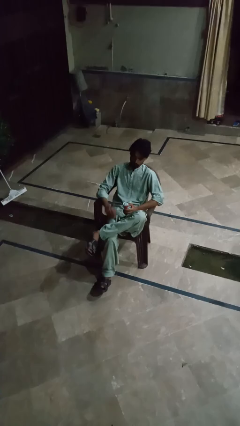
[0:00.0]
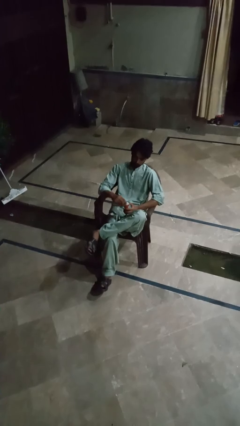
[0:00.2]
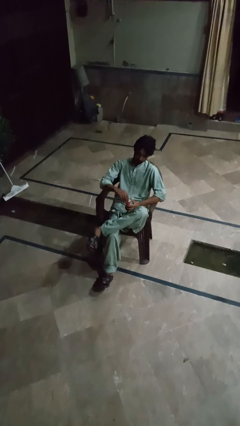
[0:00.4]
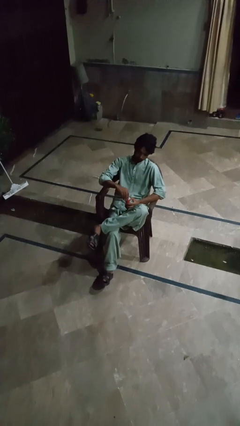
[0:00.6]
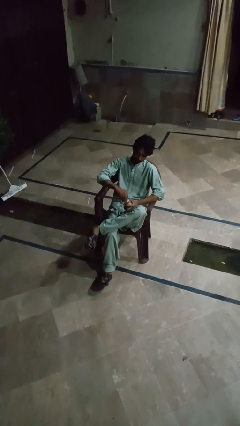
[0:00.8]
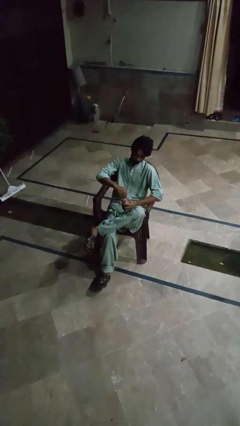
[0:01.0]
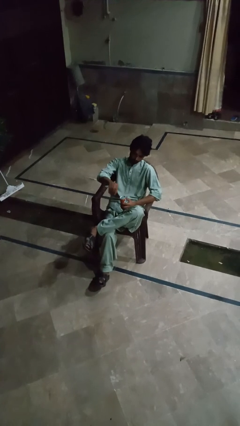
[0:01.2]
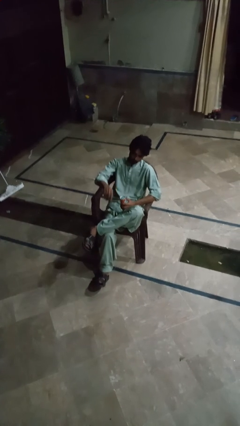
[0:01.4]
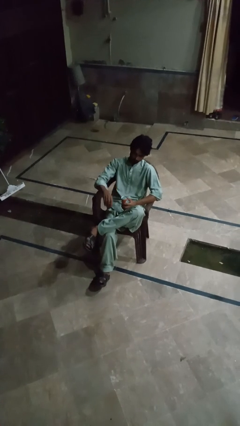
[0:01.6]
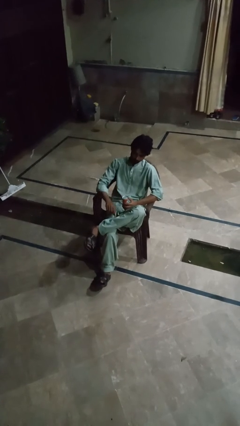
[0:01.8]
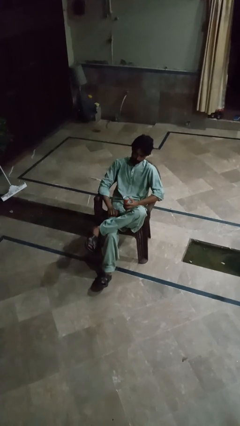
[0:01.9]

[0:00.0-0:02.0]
person opens can with can opener

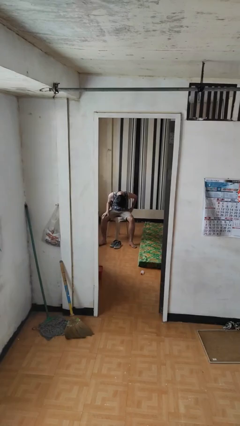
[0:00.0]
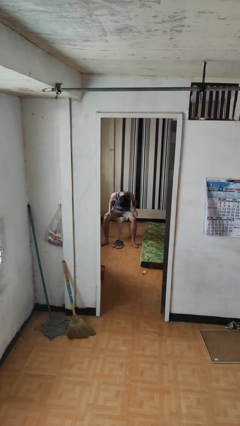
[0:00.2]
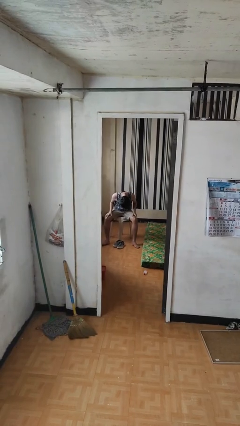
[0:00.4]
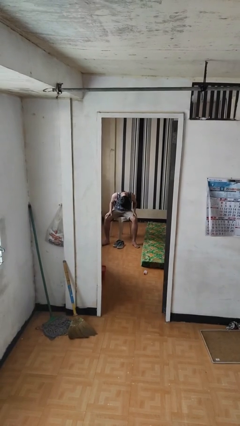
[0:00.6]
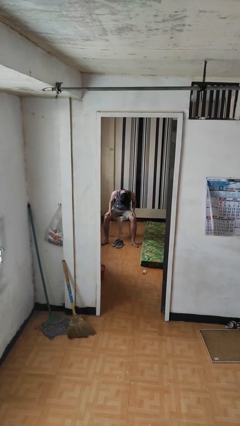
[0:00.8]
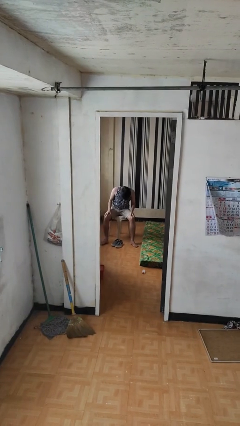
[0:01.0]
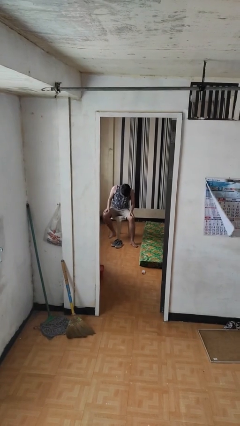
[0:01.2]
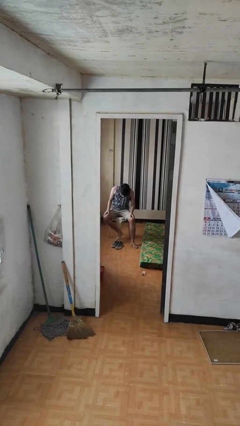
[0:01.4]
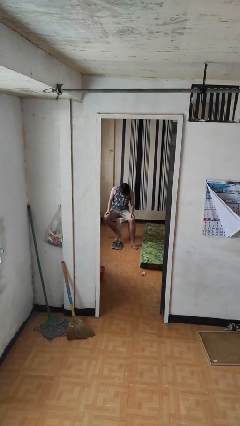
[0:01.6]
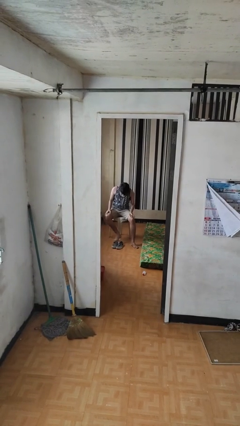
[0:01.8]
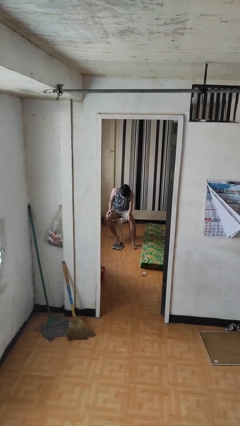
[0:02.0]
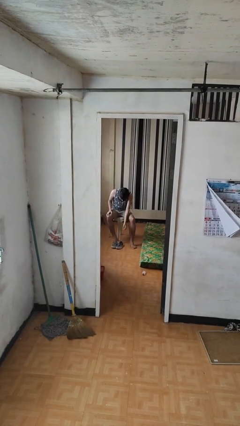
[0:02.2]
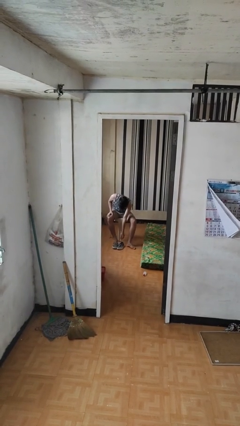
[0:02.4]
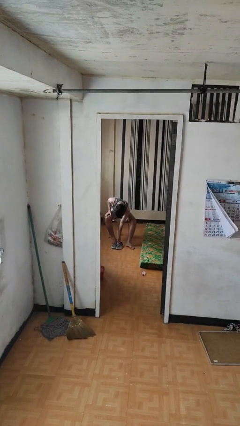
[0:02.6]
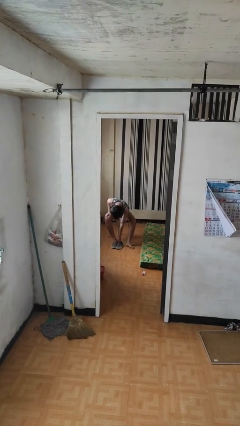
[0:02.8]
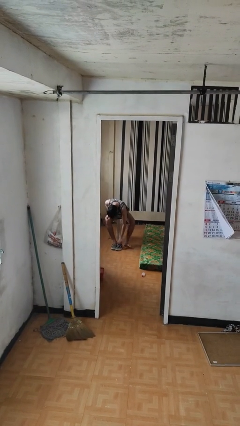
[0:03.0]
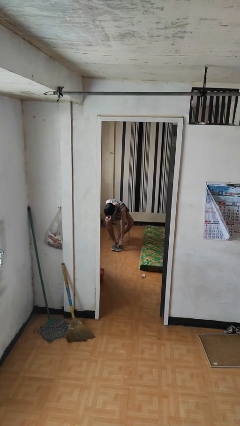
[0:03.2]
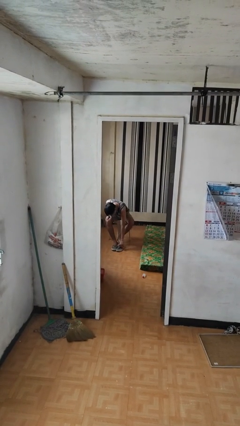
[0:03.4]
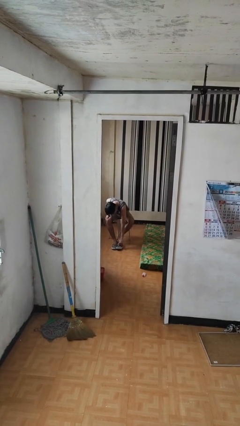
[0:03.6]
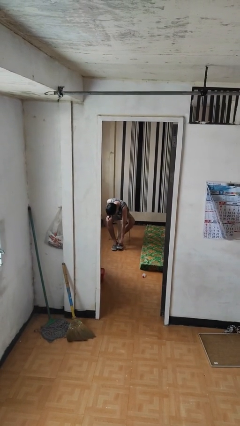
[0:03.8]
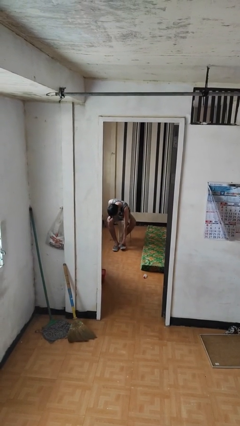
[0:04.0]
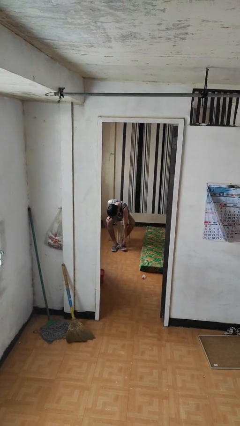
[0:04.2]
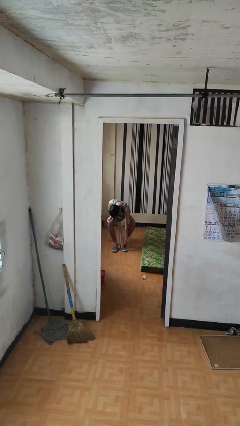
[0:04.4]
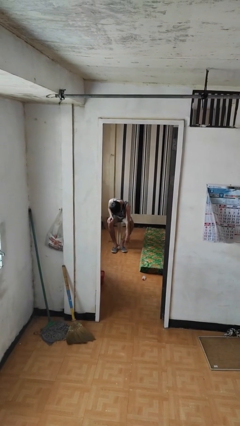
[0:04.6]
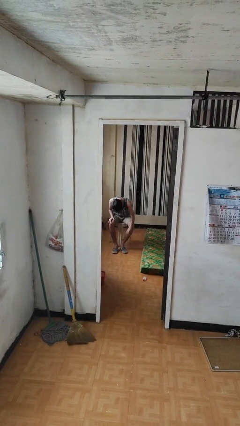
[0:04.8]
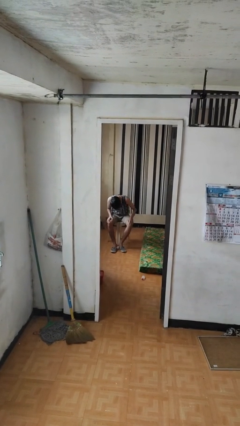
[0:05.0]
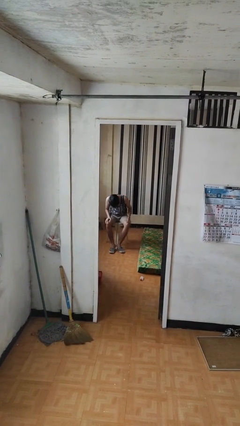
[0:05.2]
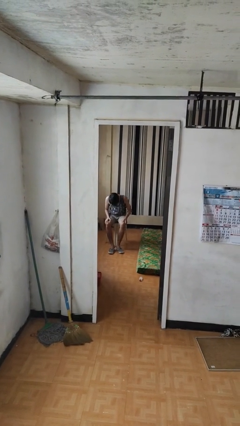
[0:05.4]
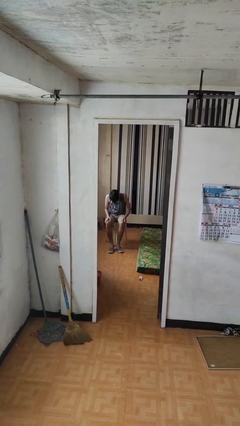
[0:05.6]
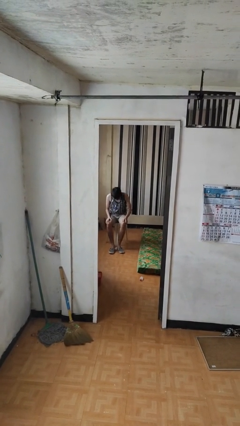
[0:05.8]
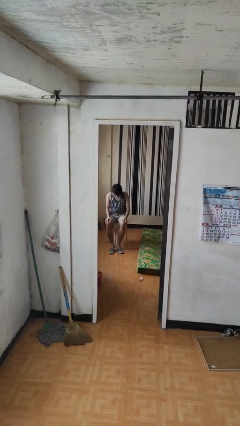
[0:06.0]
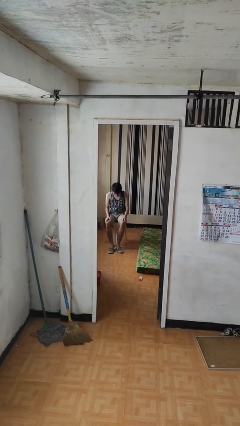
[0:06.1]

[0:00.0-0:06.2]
person puts on shoes

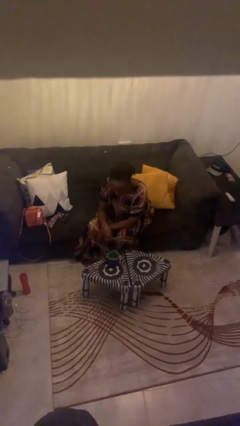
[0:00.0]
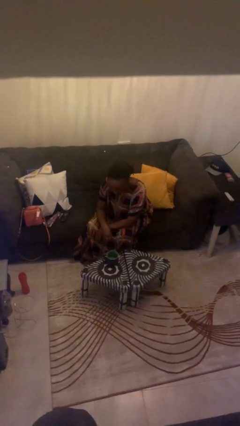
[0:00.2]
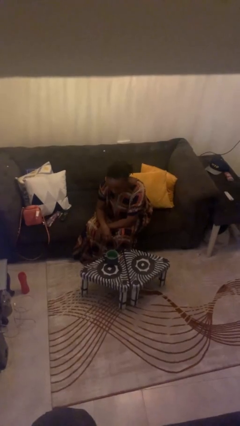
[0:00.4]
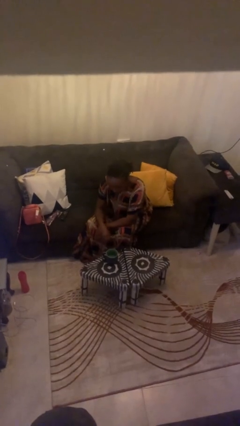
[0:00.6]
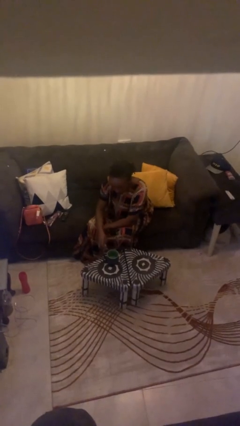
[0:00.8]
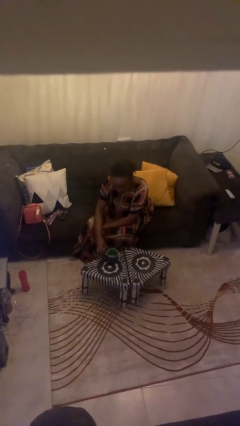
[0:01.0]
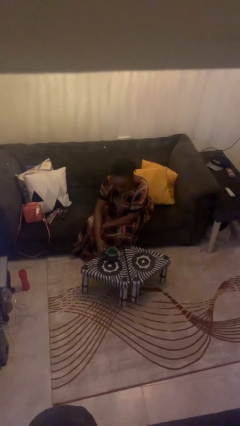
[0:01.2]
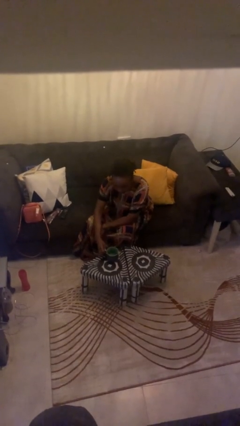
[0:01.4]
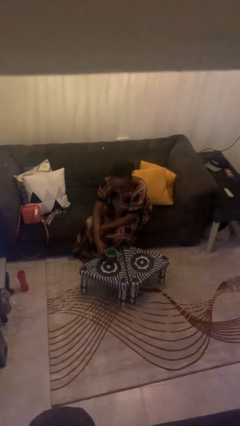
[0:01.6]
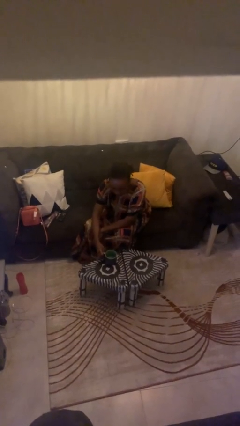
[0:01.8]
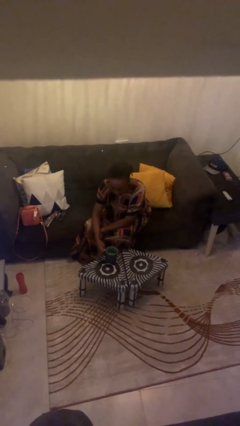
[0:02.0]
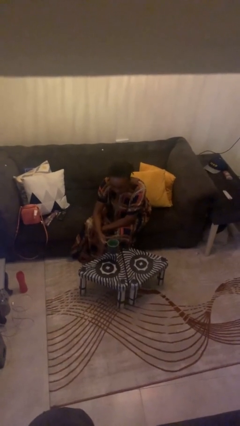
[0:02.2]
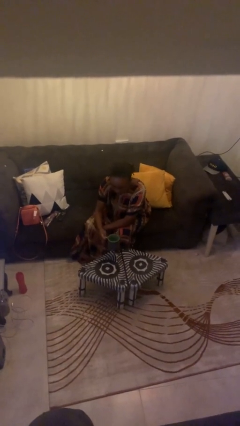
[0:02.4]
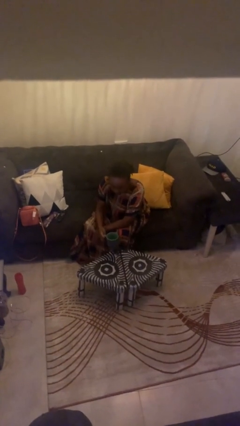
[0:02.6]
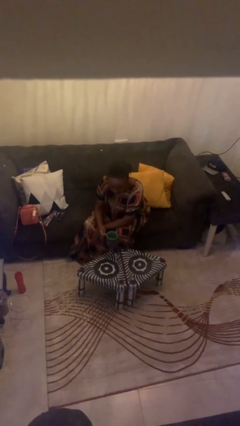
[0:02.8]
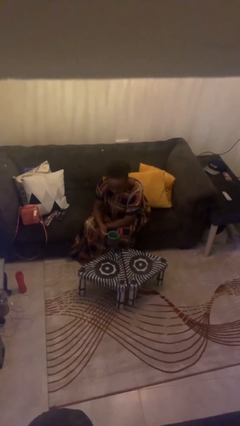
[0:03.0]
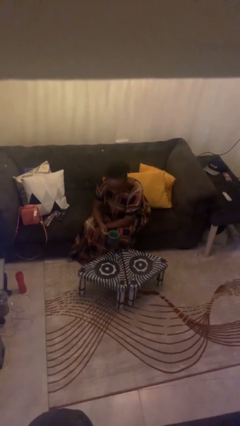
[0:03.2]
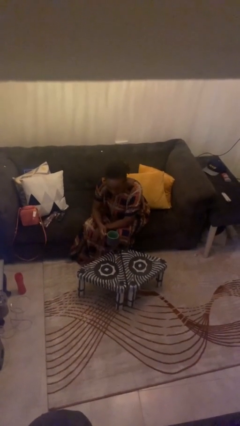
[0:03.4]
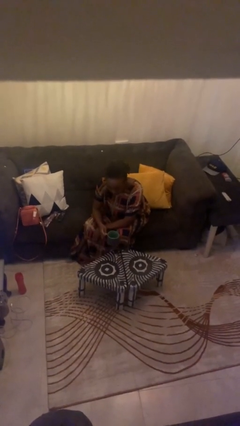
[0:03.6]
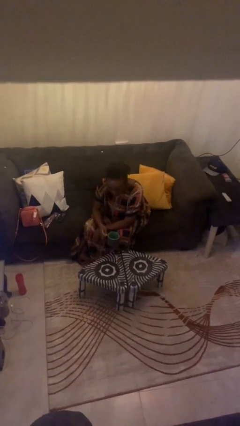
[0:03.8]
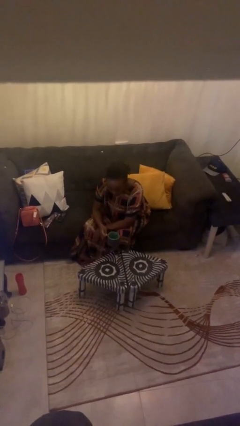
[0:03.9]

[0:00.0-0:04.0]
person picks up object from table

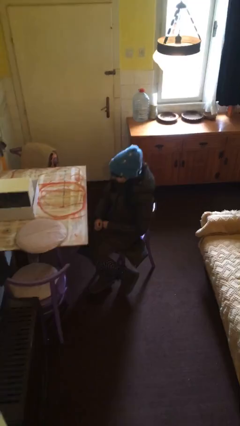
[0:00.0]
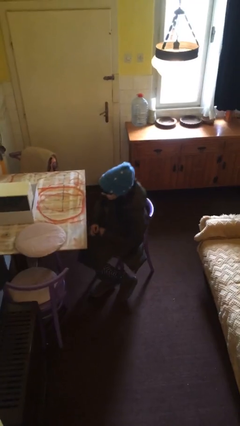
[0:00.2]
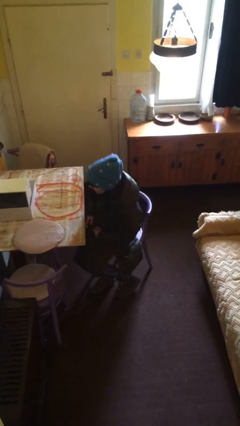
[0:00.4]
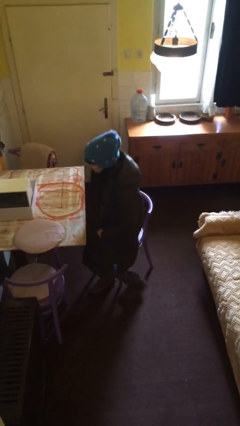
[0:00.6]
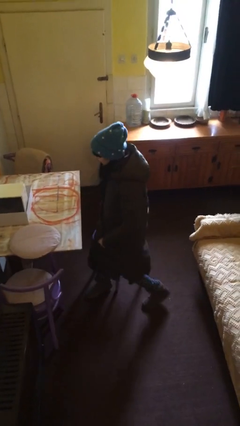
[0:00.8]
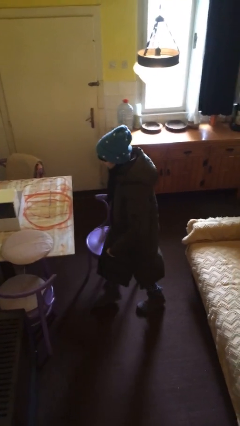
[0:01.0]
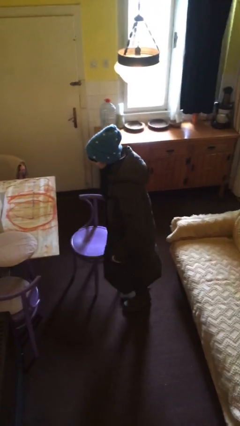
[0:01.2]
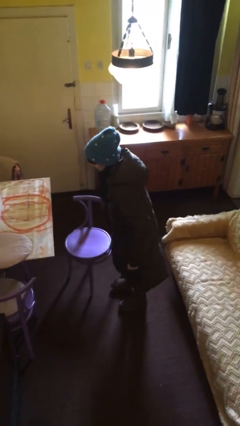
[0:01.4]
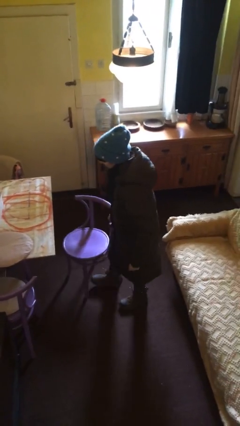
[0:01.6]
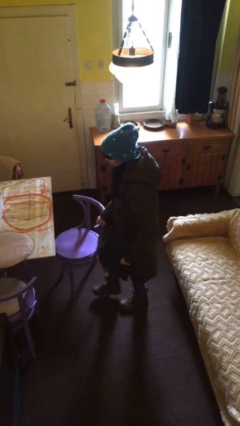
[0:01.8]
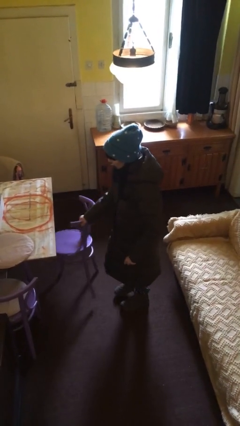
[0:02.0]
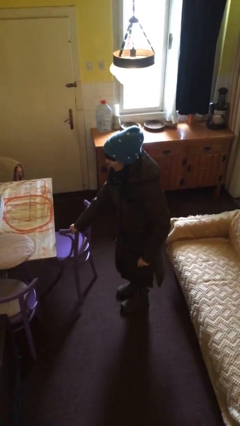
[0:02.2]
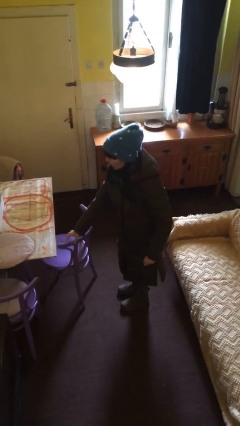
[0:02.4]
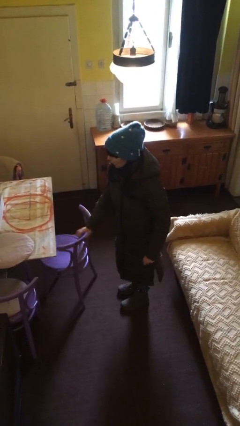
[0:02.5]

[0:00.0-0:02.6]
person stands up

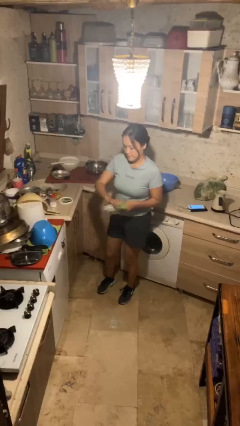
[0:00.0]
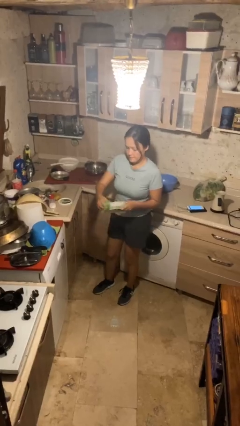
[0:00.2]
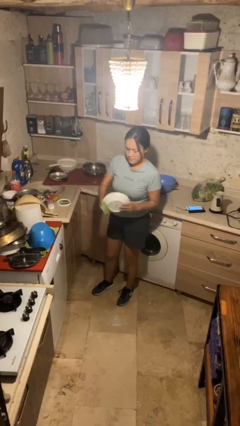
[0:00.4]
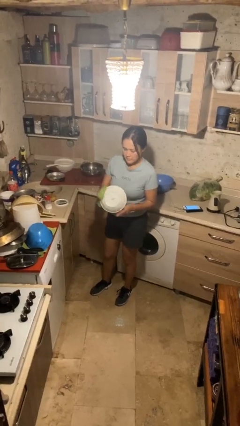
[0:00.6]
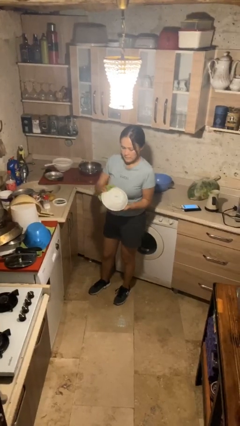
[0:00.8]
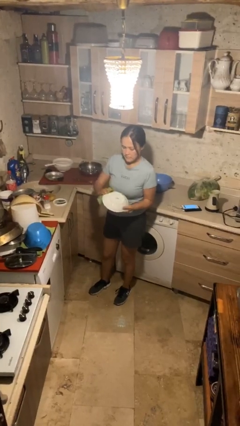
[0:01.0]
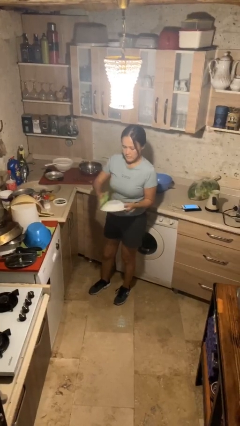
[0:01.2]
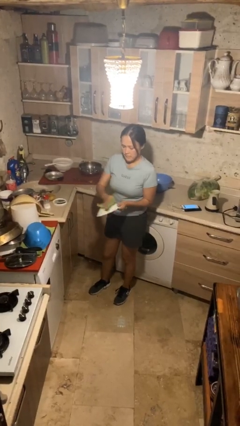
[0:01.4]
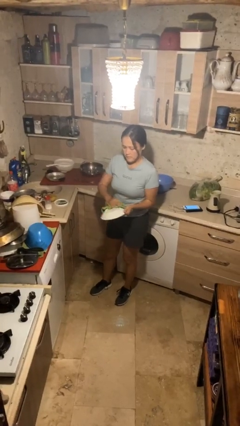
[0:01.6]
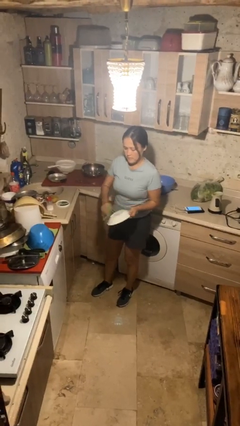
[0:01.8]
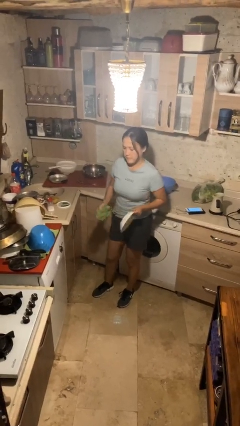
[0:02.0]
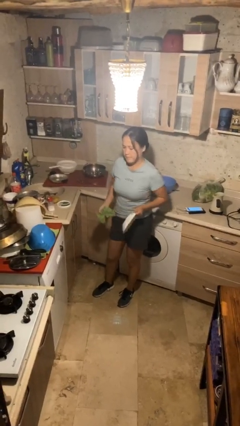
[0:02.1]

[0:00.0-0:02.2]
person dries dish

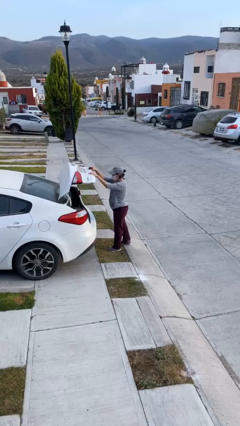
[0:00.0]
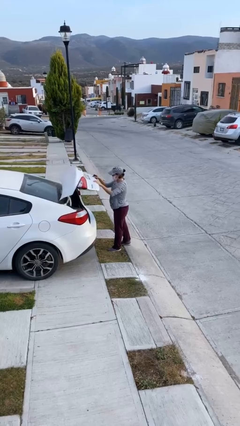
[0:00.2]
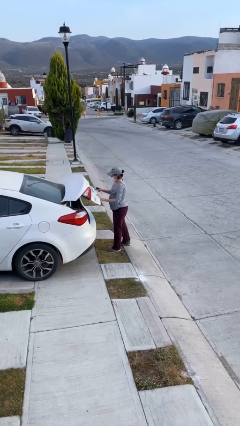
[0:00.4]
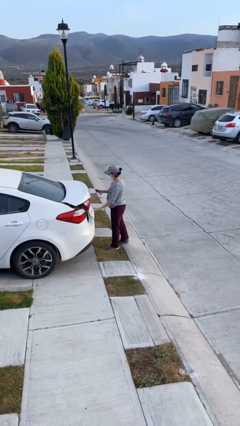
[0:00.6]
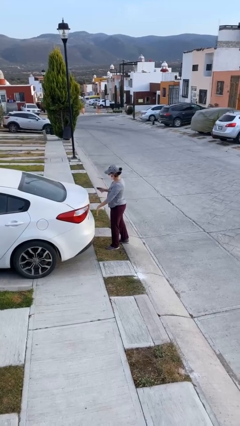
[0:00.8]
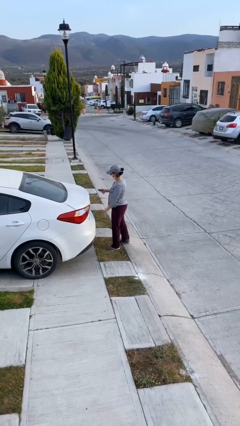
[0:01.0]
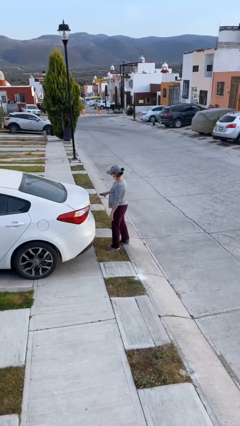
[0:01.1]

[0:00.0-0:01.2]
person closes car trunk
